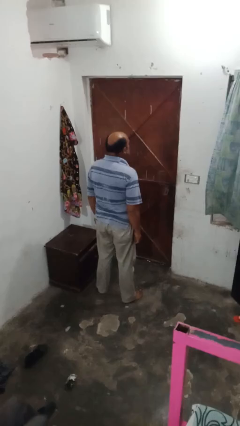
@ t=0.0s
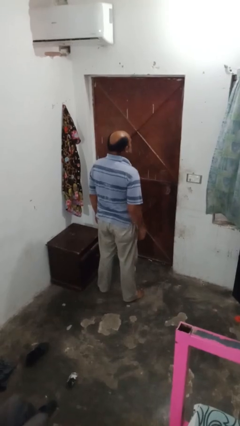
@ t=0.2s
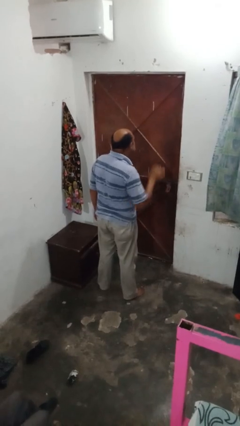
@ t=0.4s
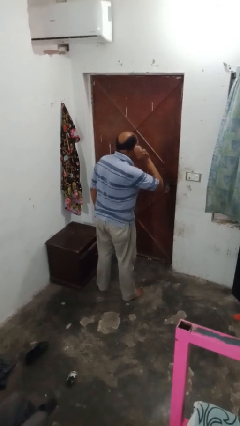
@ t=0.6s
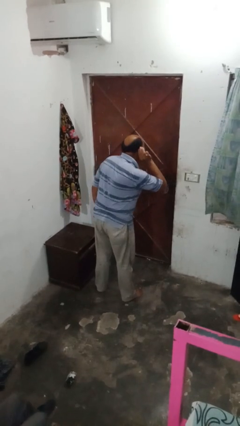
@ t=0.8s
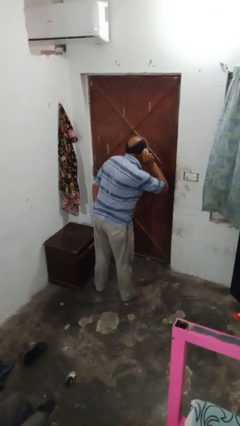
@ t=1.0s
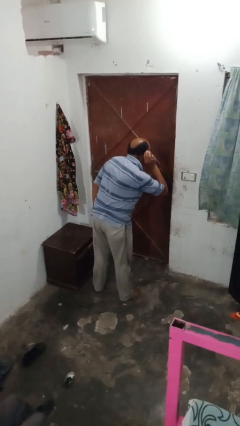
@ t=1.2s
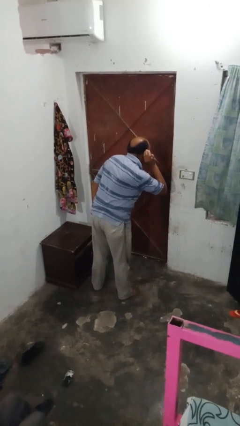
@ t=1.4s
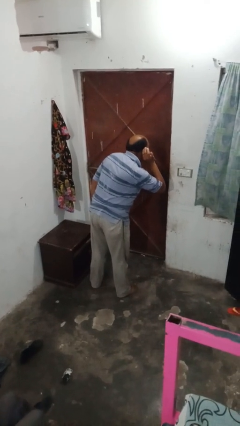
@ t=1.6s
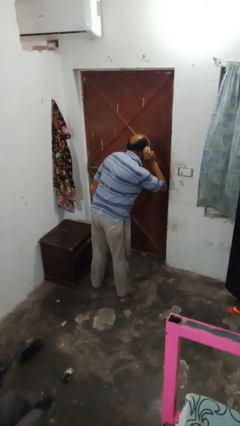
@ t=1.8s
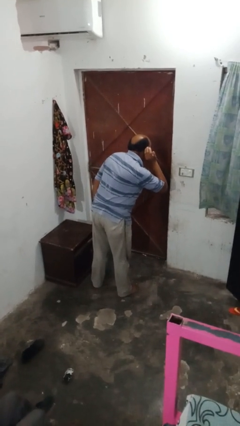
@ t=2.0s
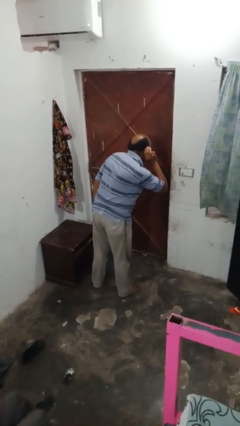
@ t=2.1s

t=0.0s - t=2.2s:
person gestures listen closely

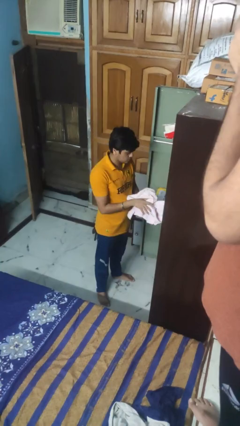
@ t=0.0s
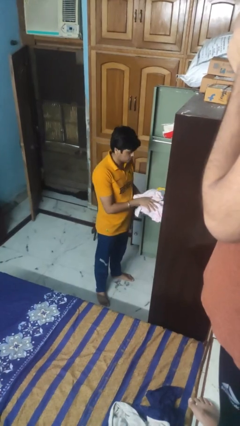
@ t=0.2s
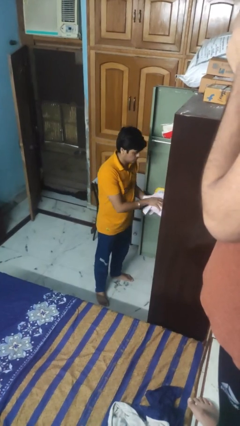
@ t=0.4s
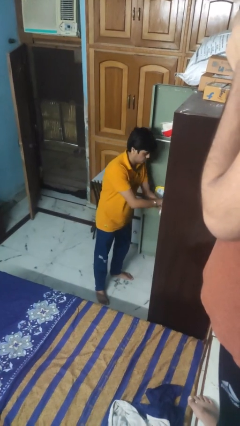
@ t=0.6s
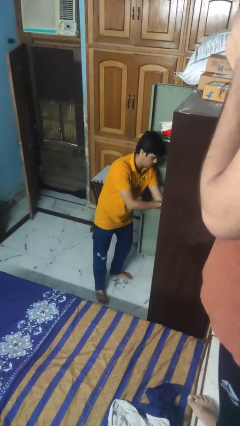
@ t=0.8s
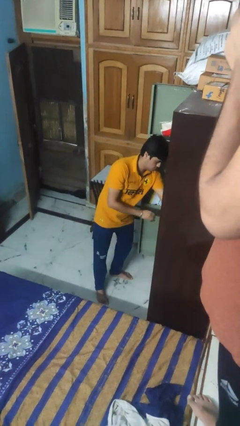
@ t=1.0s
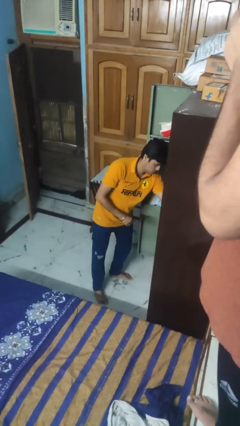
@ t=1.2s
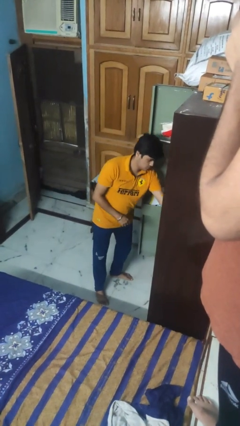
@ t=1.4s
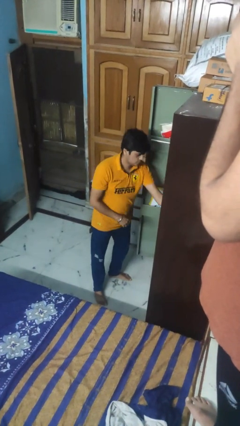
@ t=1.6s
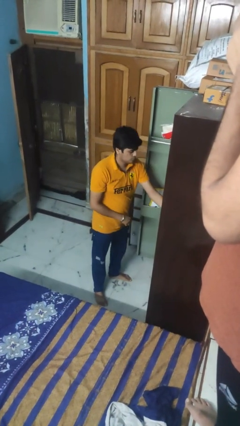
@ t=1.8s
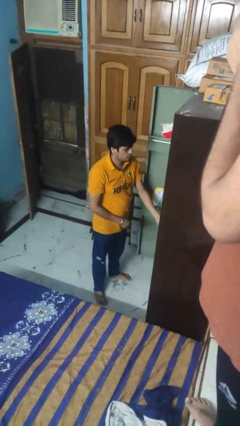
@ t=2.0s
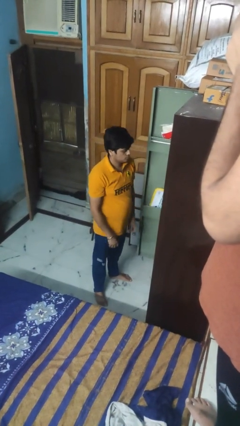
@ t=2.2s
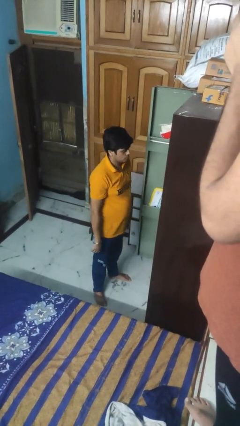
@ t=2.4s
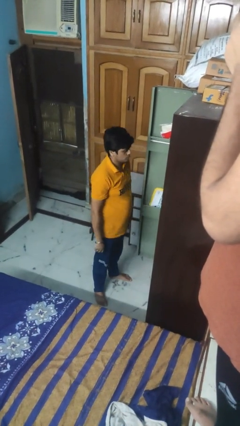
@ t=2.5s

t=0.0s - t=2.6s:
person puts clothes into dresser

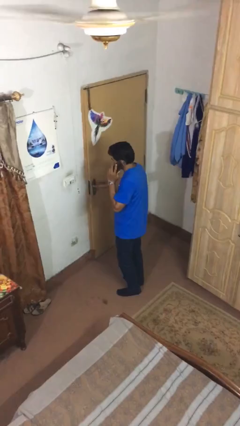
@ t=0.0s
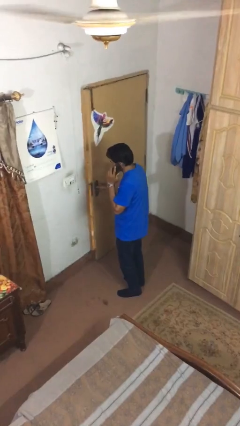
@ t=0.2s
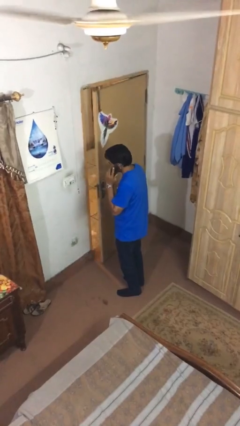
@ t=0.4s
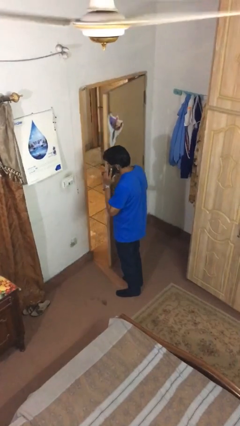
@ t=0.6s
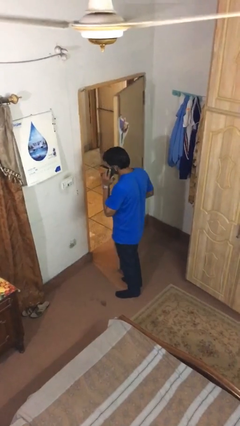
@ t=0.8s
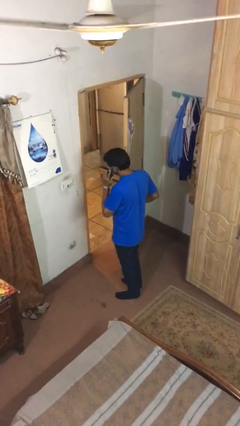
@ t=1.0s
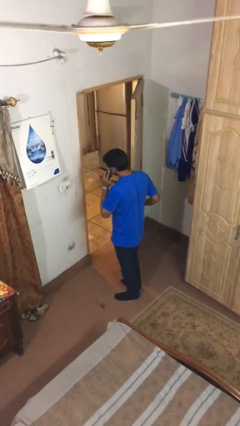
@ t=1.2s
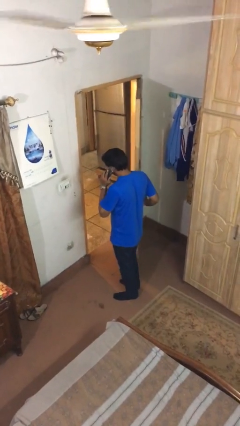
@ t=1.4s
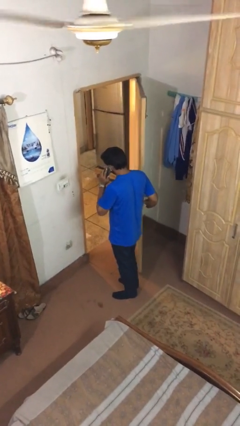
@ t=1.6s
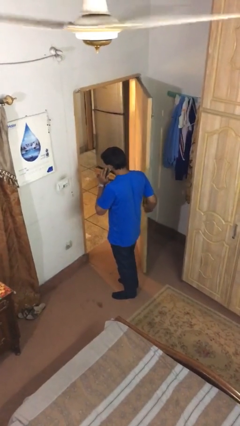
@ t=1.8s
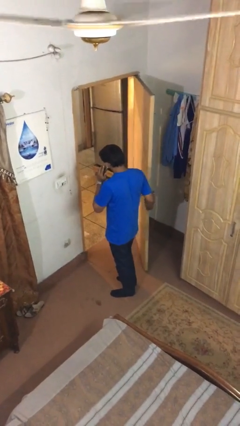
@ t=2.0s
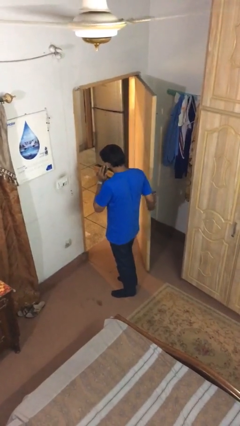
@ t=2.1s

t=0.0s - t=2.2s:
person opens facility door

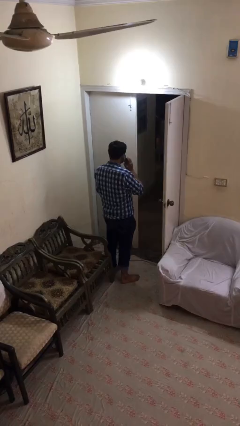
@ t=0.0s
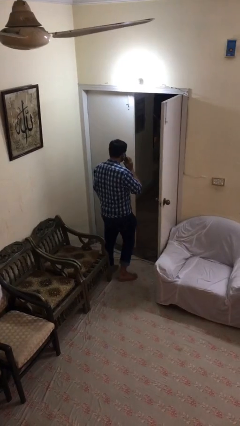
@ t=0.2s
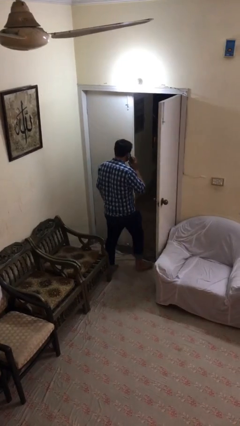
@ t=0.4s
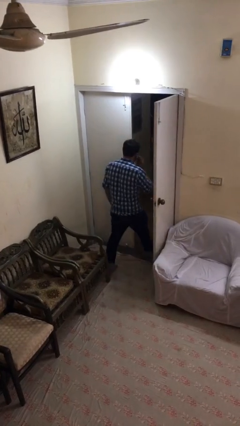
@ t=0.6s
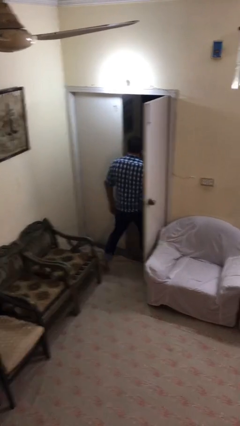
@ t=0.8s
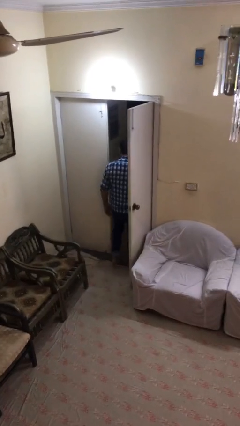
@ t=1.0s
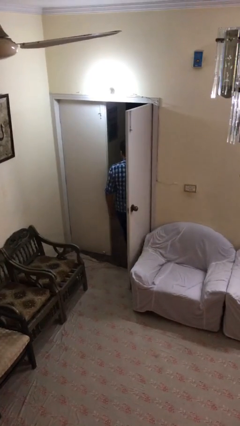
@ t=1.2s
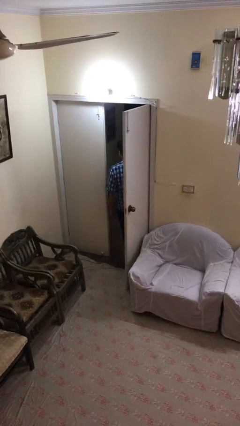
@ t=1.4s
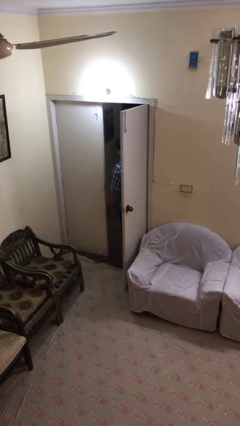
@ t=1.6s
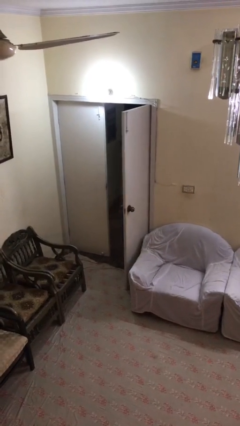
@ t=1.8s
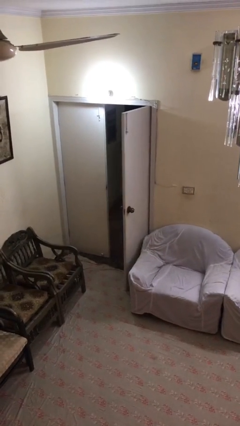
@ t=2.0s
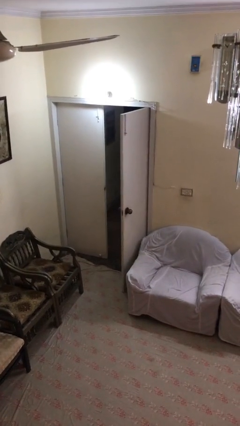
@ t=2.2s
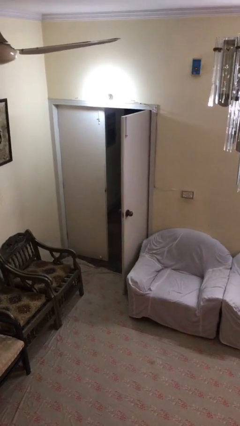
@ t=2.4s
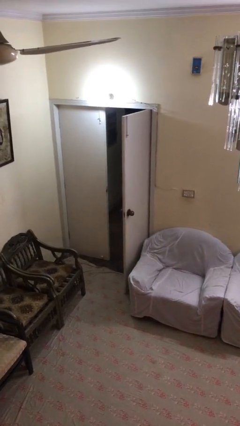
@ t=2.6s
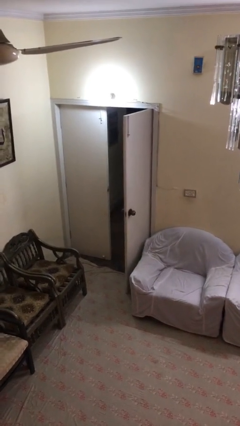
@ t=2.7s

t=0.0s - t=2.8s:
person exits scene through structure

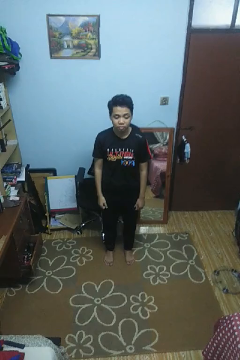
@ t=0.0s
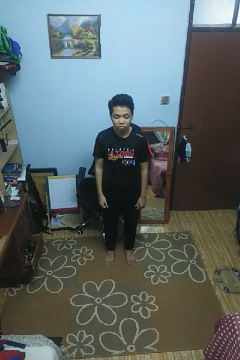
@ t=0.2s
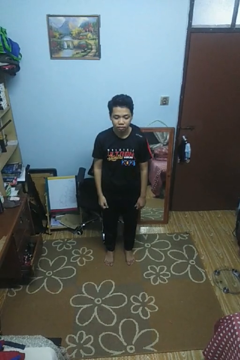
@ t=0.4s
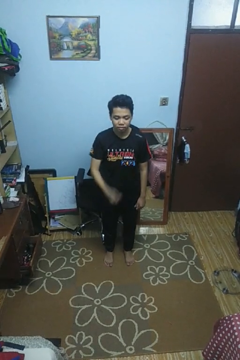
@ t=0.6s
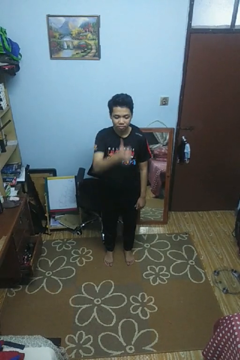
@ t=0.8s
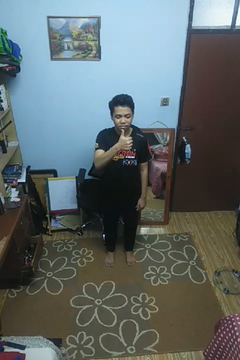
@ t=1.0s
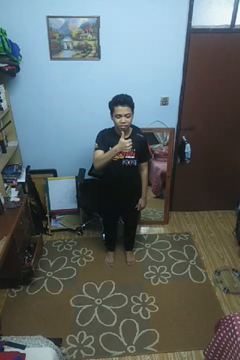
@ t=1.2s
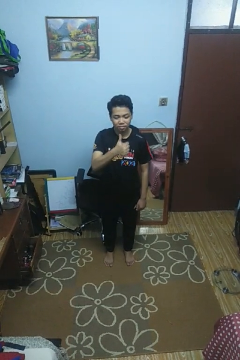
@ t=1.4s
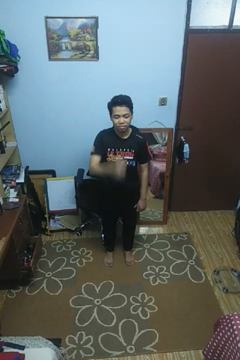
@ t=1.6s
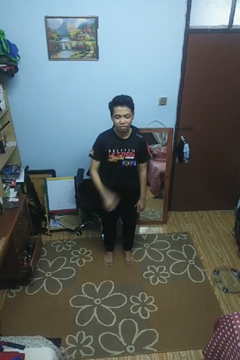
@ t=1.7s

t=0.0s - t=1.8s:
person gestures thumbs up

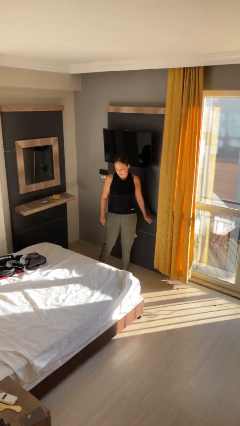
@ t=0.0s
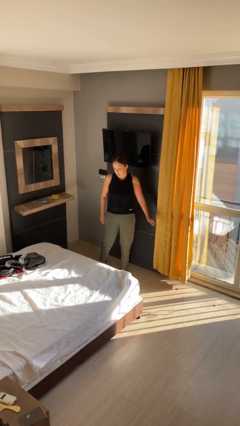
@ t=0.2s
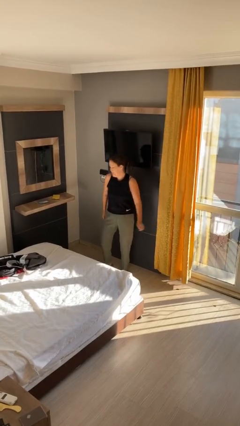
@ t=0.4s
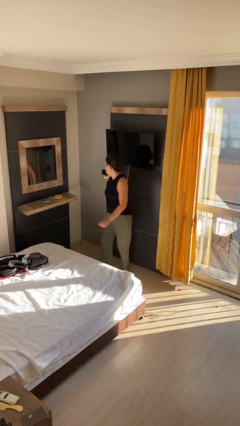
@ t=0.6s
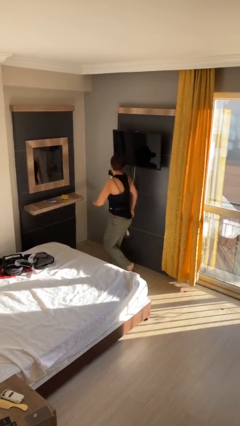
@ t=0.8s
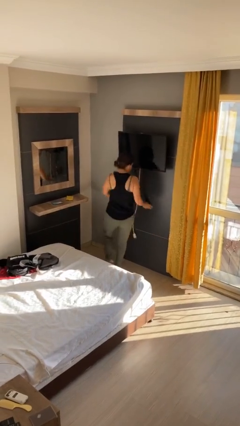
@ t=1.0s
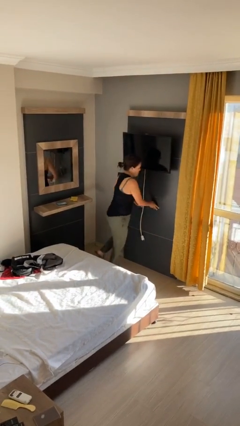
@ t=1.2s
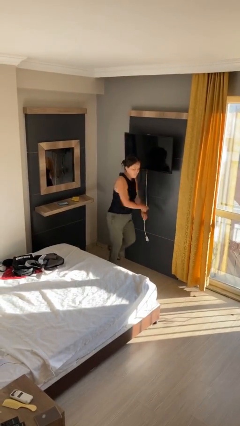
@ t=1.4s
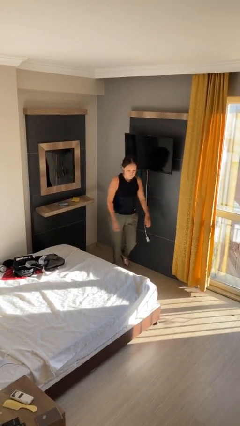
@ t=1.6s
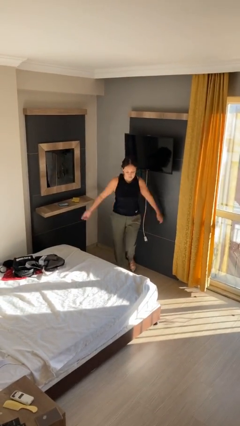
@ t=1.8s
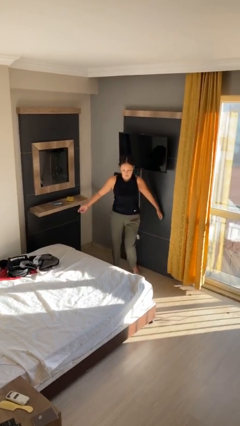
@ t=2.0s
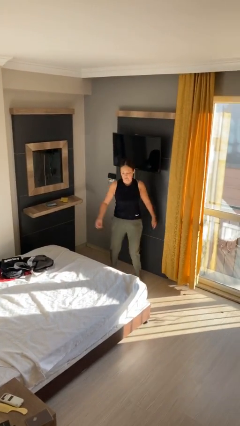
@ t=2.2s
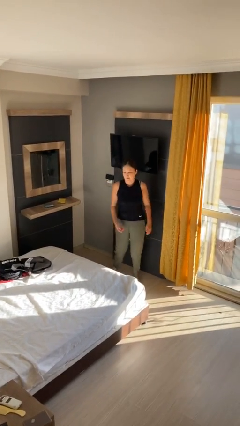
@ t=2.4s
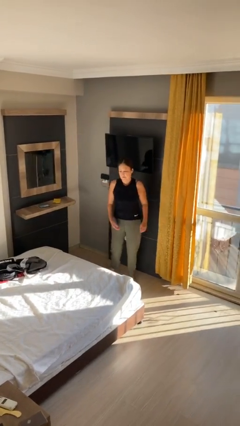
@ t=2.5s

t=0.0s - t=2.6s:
person twirls

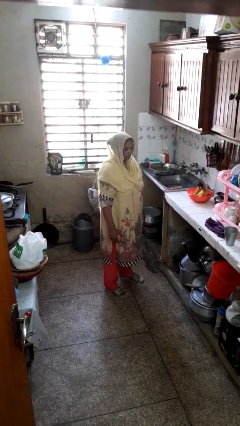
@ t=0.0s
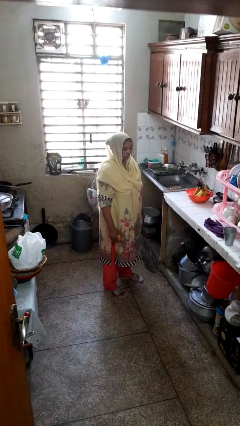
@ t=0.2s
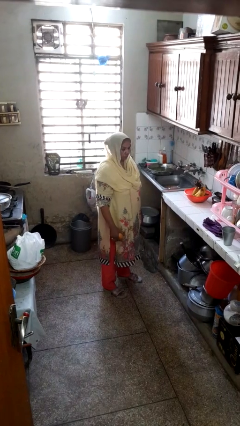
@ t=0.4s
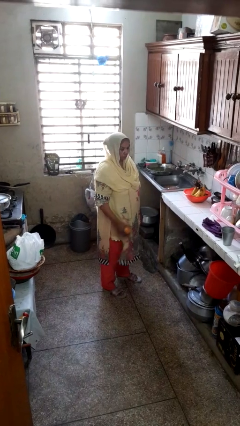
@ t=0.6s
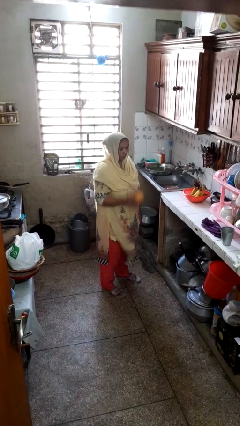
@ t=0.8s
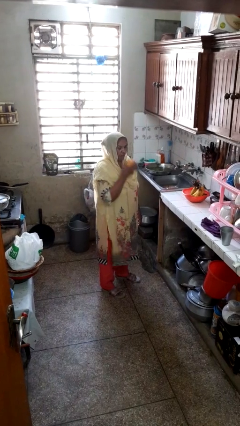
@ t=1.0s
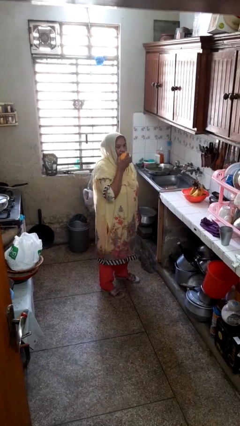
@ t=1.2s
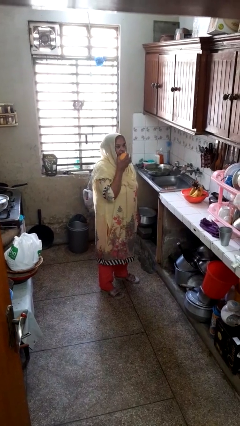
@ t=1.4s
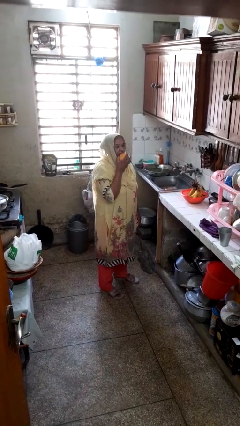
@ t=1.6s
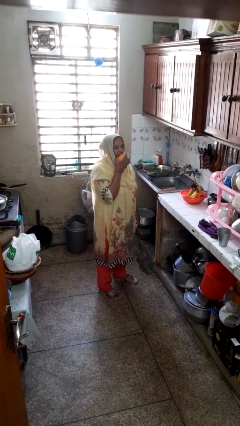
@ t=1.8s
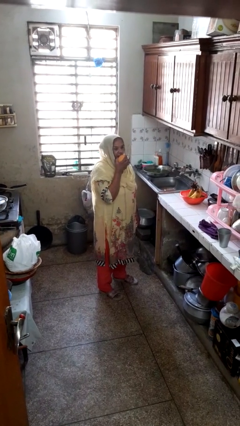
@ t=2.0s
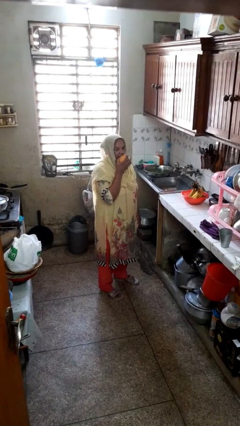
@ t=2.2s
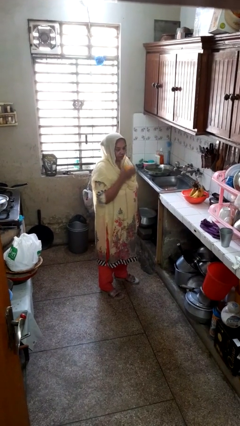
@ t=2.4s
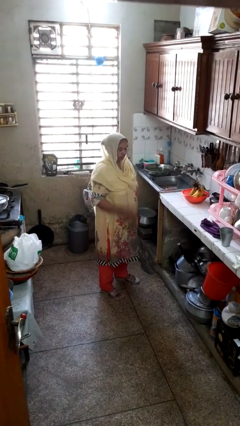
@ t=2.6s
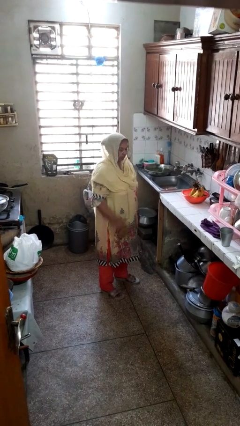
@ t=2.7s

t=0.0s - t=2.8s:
person eats apple

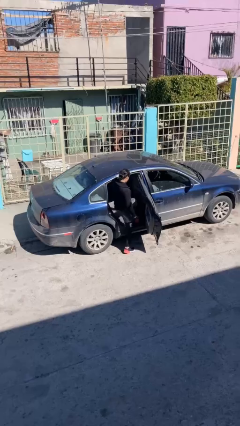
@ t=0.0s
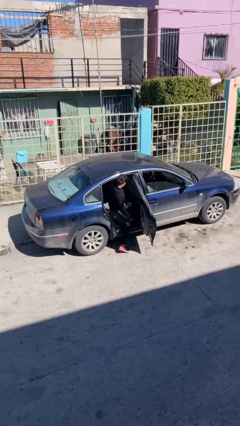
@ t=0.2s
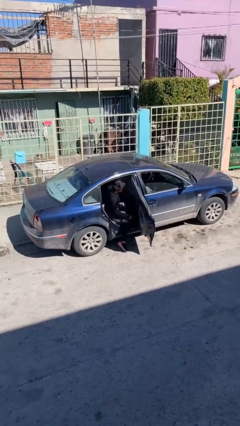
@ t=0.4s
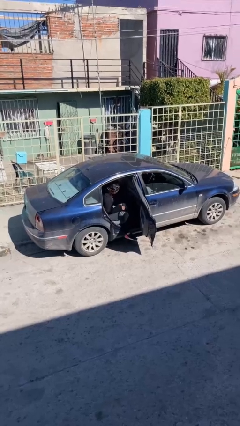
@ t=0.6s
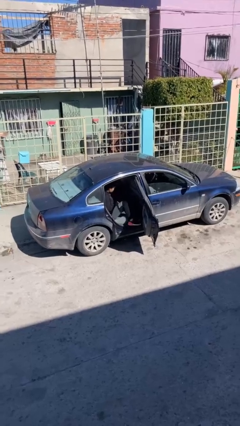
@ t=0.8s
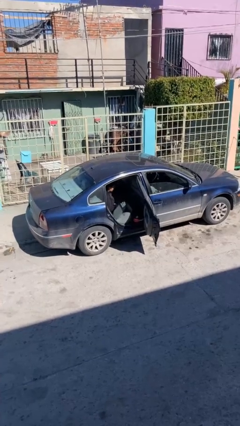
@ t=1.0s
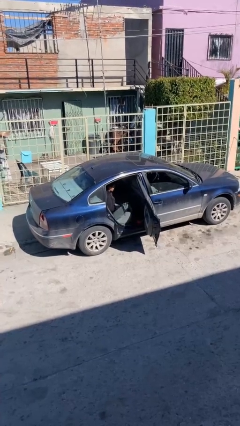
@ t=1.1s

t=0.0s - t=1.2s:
person enters car
